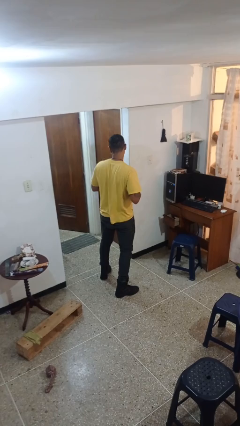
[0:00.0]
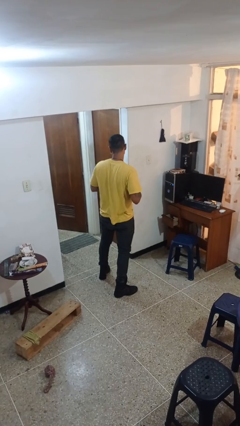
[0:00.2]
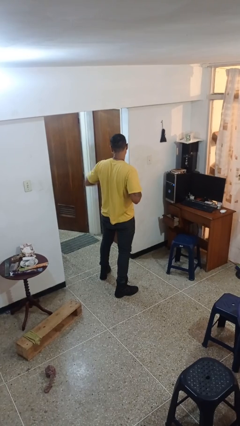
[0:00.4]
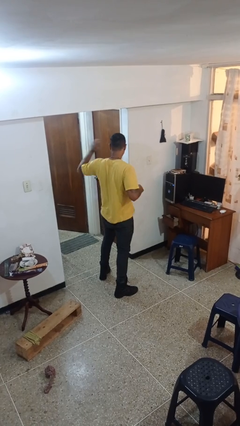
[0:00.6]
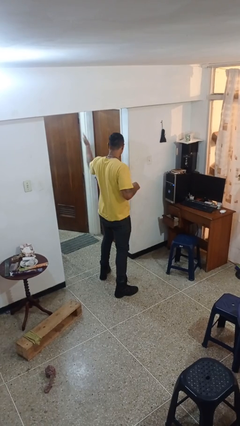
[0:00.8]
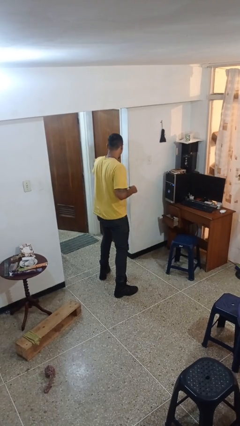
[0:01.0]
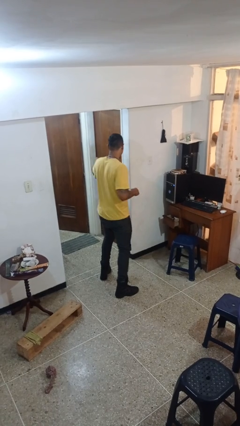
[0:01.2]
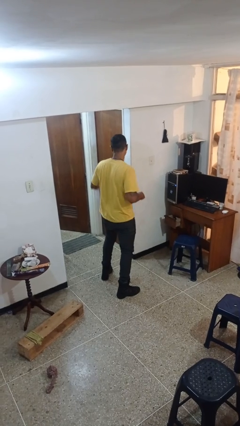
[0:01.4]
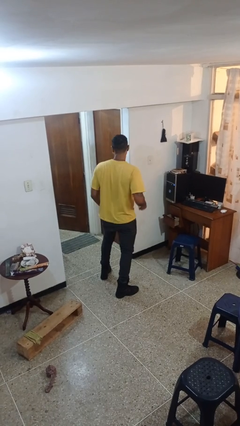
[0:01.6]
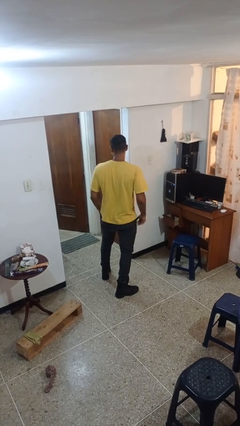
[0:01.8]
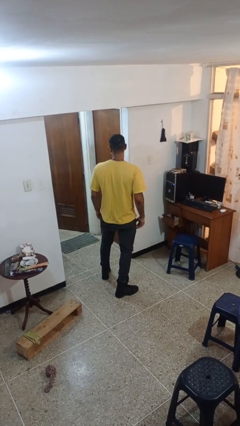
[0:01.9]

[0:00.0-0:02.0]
person karate chop

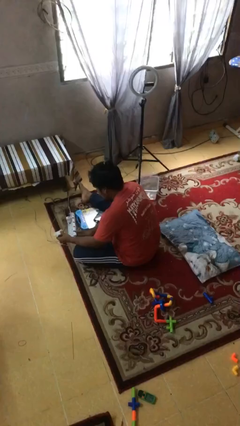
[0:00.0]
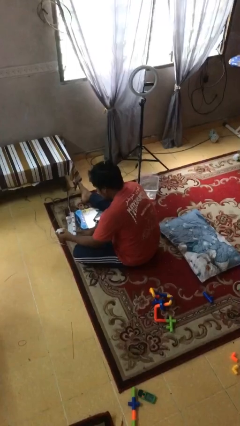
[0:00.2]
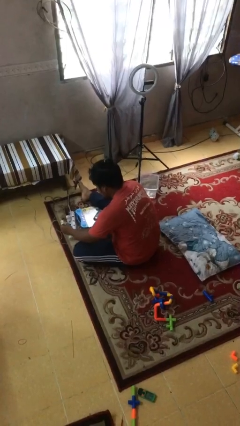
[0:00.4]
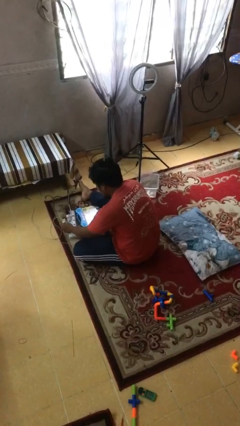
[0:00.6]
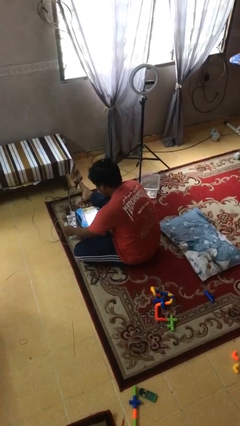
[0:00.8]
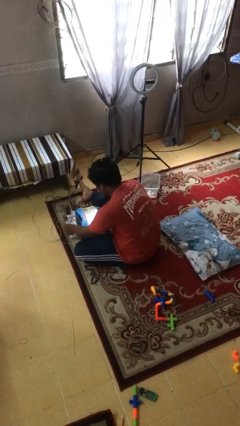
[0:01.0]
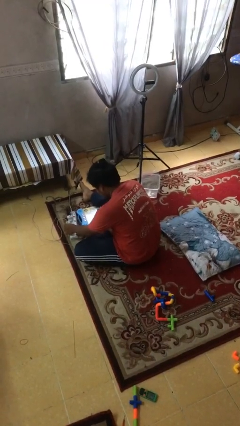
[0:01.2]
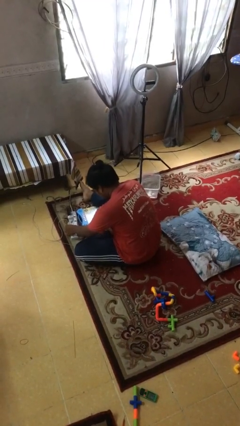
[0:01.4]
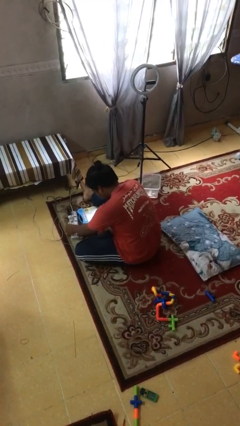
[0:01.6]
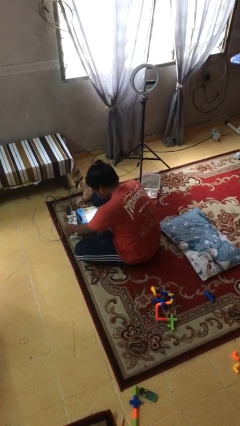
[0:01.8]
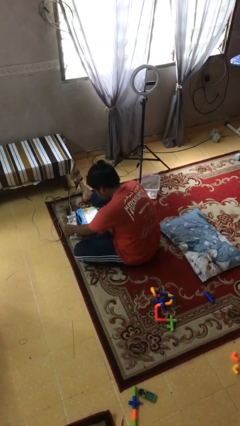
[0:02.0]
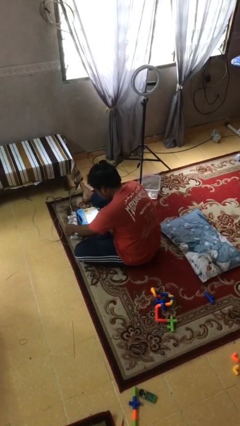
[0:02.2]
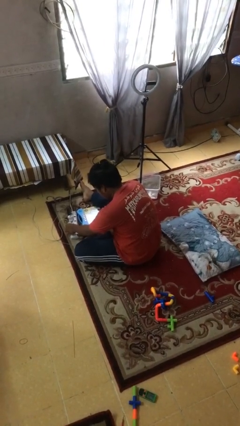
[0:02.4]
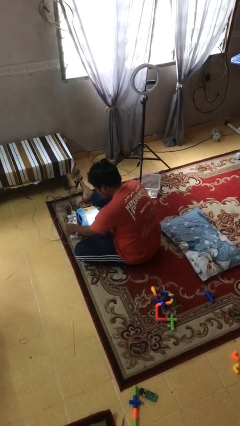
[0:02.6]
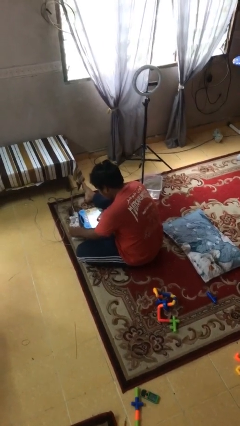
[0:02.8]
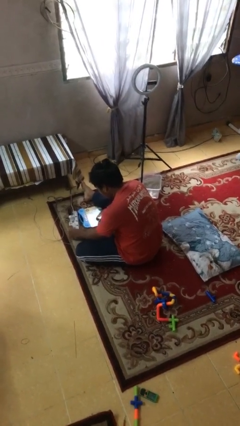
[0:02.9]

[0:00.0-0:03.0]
person plugs into electrical socket

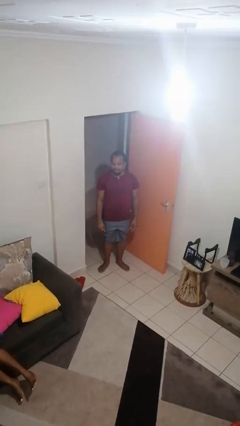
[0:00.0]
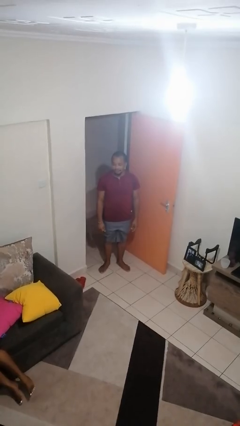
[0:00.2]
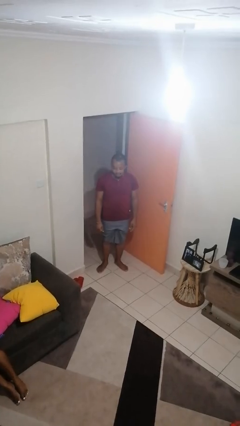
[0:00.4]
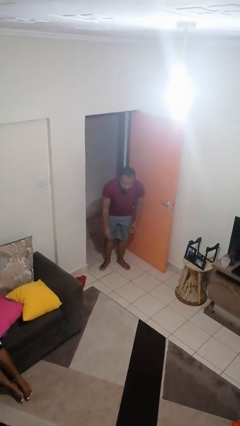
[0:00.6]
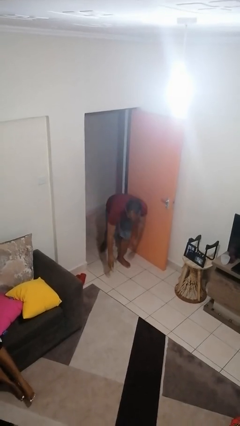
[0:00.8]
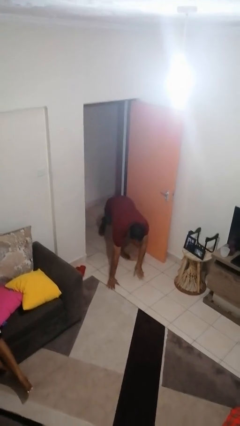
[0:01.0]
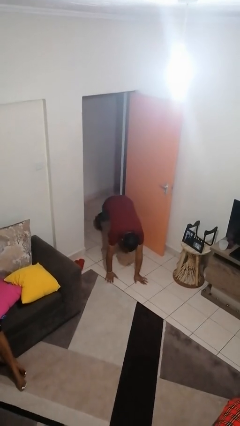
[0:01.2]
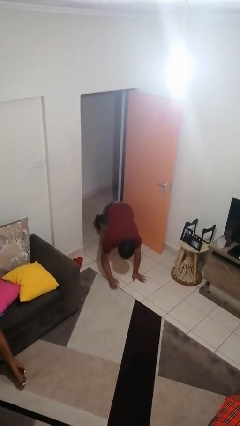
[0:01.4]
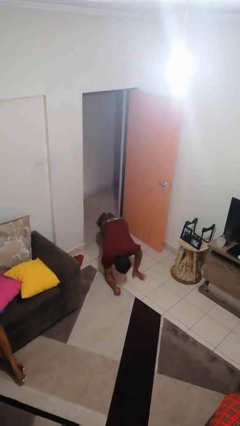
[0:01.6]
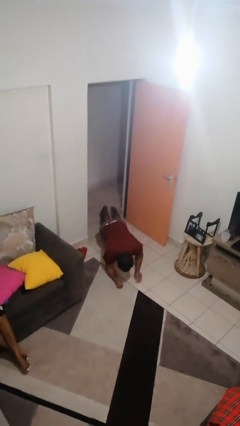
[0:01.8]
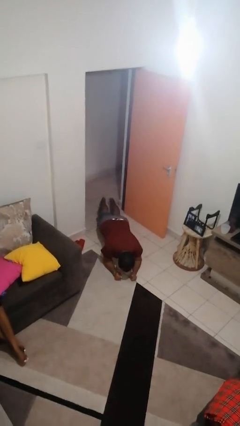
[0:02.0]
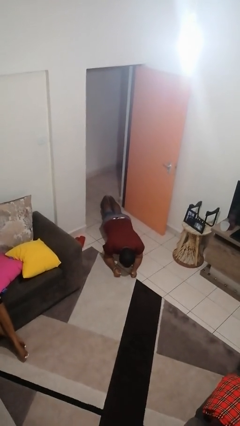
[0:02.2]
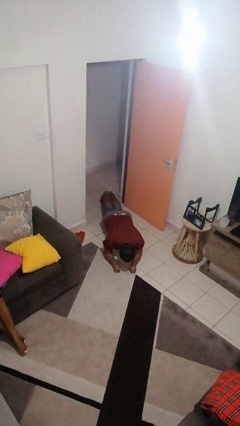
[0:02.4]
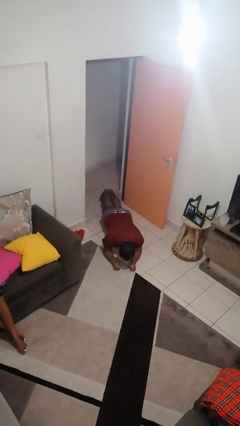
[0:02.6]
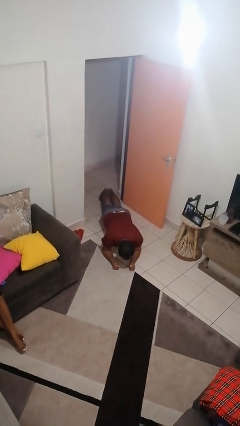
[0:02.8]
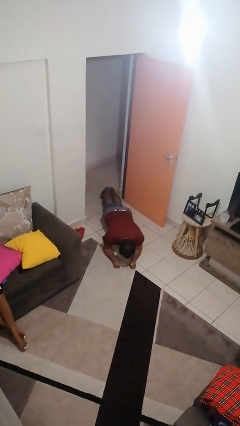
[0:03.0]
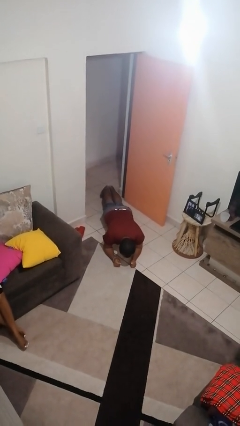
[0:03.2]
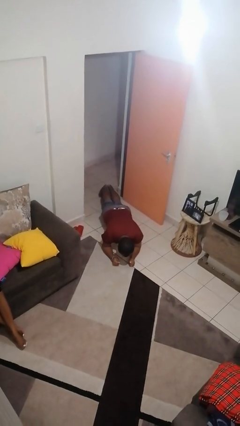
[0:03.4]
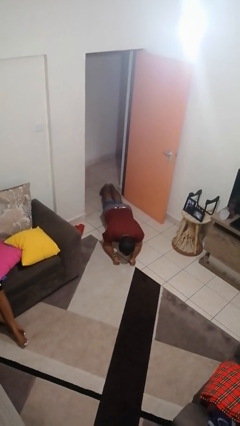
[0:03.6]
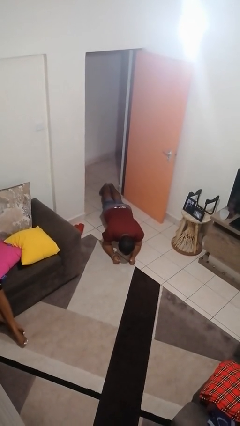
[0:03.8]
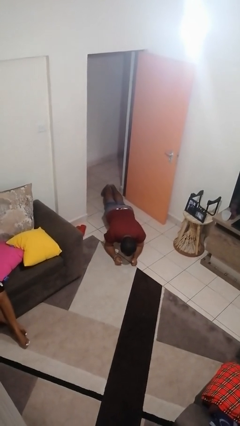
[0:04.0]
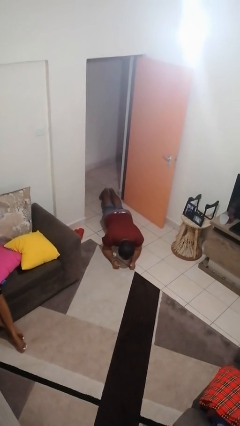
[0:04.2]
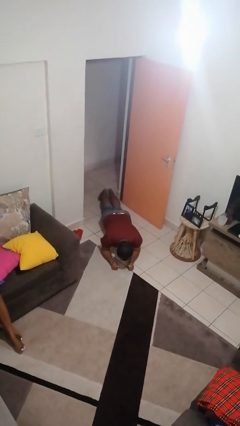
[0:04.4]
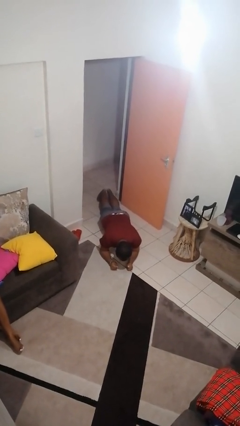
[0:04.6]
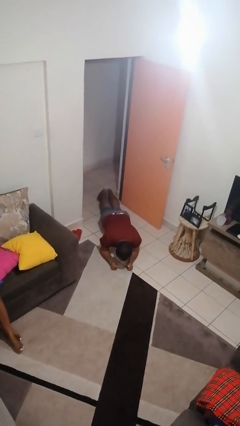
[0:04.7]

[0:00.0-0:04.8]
person exercises with plank

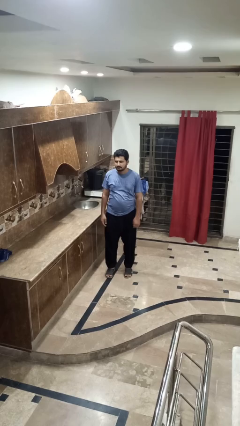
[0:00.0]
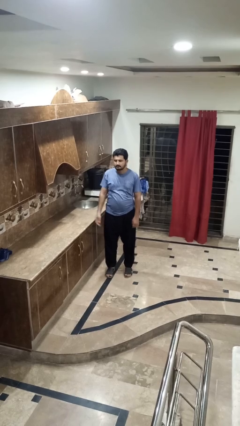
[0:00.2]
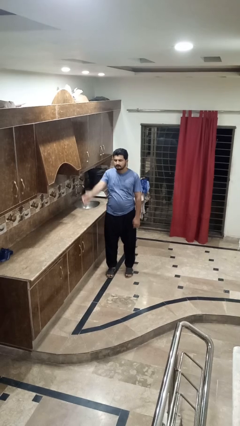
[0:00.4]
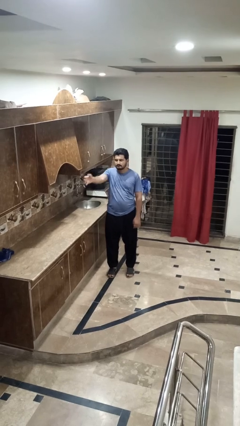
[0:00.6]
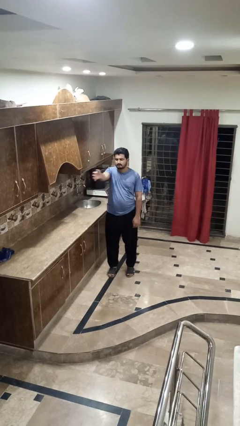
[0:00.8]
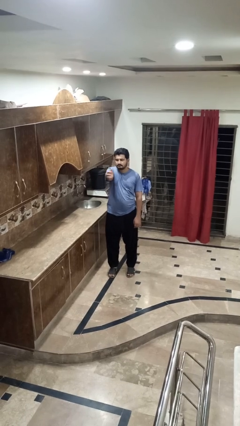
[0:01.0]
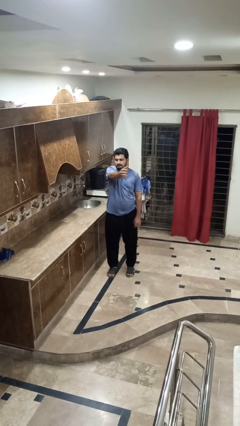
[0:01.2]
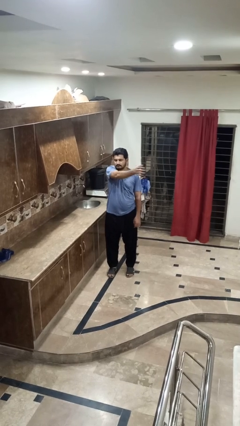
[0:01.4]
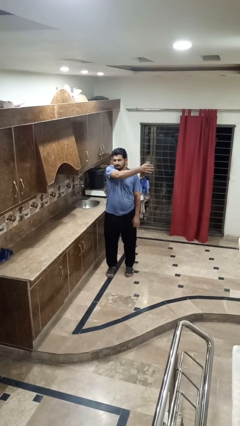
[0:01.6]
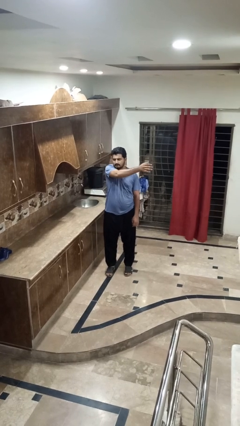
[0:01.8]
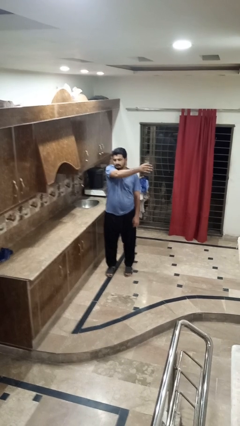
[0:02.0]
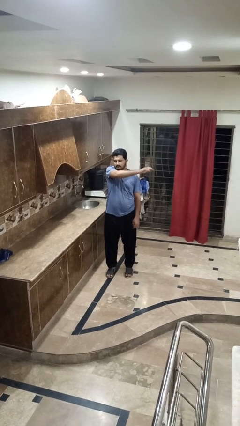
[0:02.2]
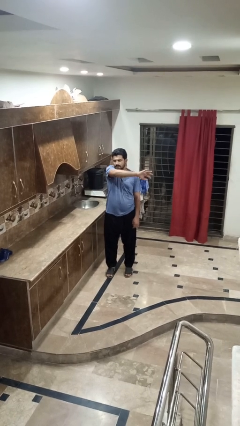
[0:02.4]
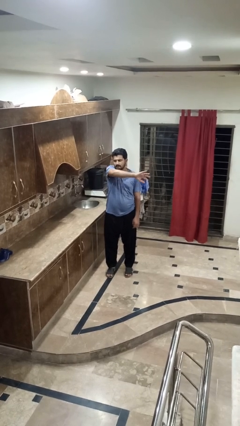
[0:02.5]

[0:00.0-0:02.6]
person gestures swipe left

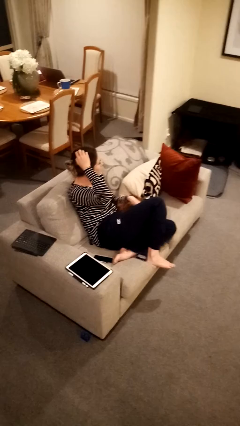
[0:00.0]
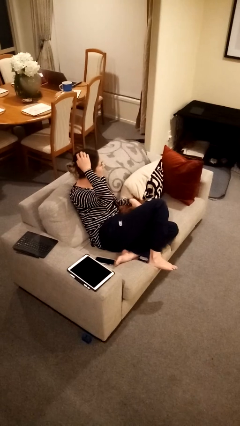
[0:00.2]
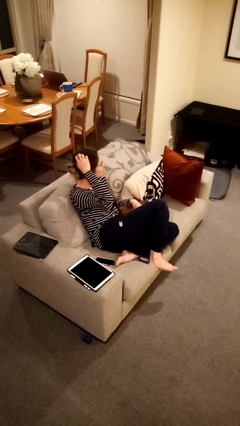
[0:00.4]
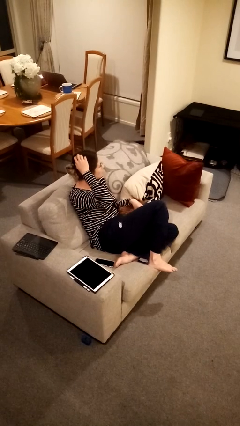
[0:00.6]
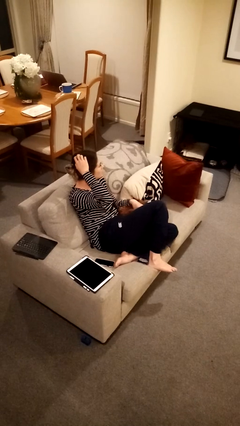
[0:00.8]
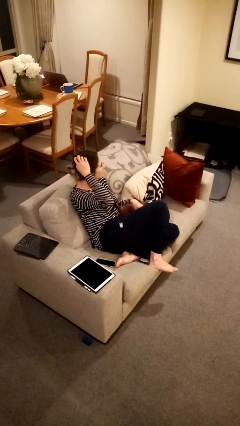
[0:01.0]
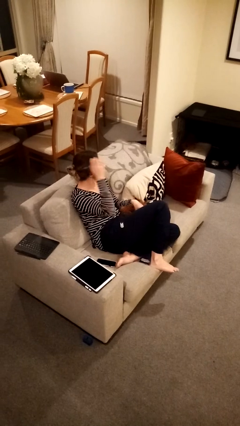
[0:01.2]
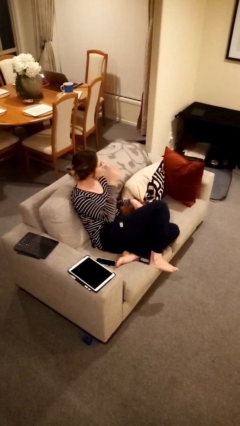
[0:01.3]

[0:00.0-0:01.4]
person scratches face

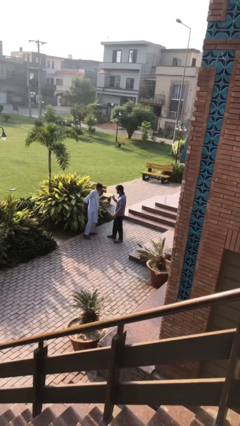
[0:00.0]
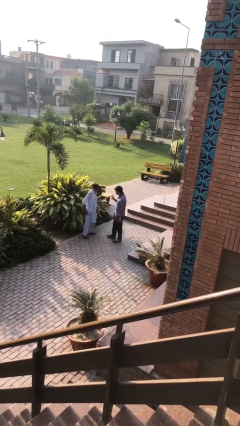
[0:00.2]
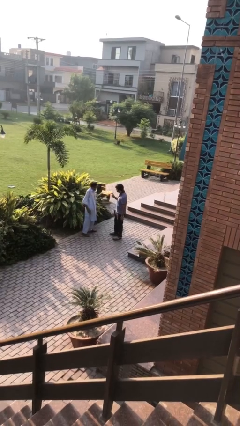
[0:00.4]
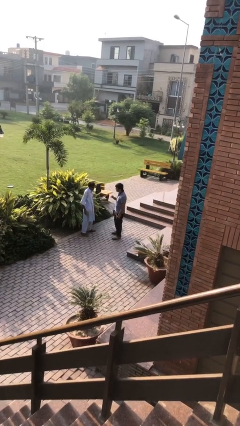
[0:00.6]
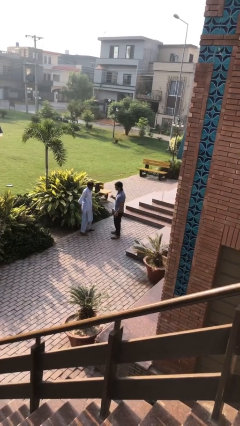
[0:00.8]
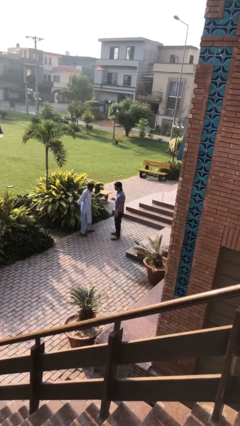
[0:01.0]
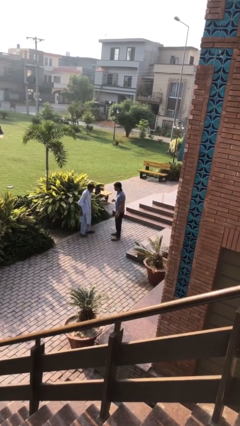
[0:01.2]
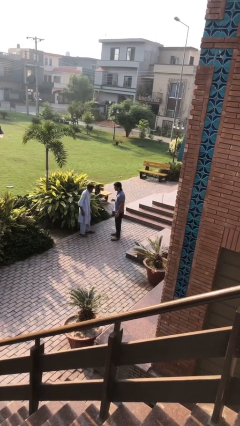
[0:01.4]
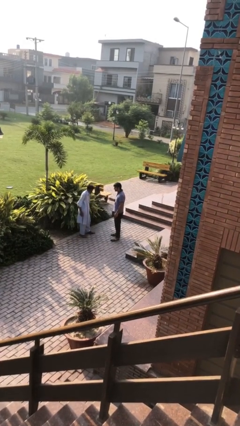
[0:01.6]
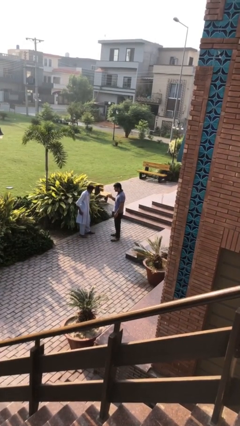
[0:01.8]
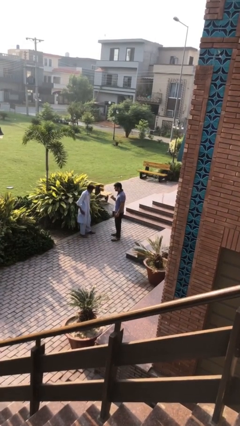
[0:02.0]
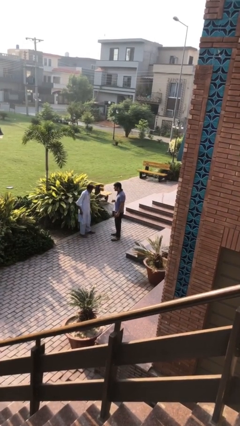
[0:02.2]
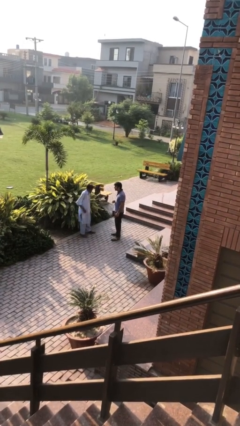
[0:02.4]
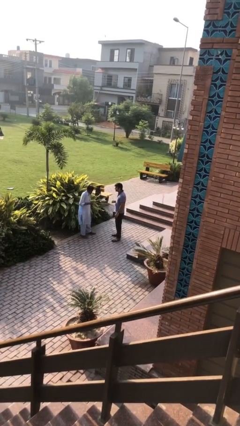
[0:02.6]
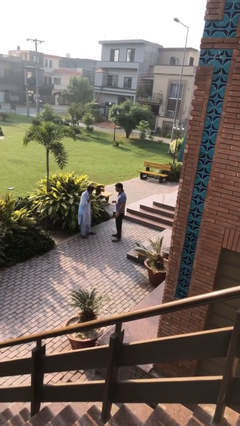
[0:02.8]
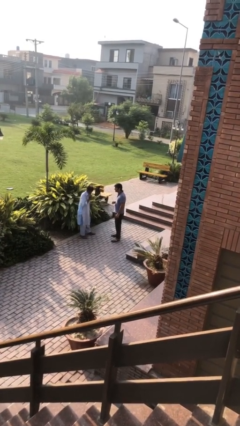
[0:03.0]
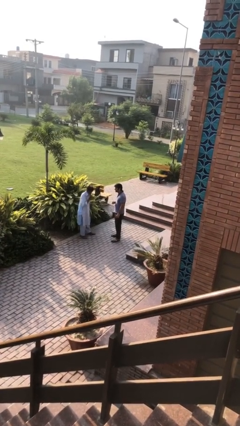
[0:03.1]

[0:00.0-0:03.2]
person talks to person

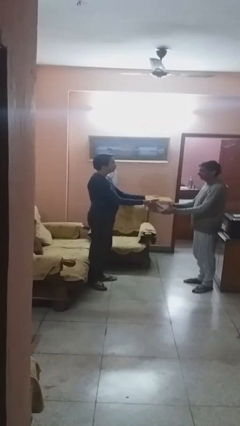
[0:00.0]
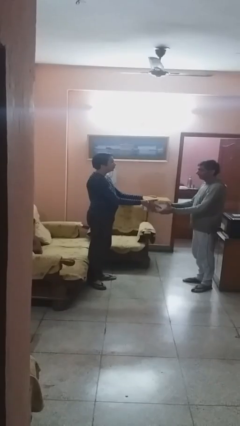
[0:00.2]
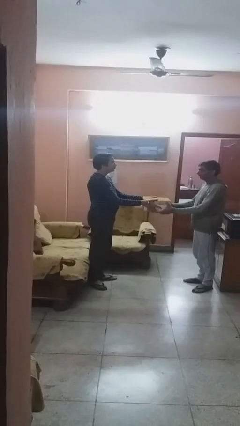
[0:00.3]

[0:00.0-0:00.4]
person transfers object to person
